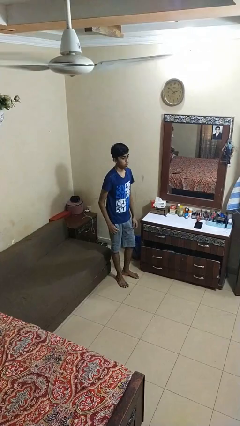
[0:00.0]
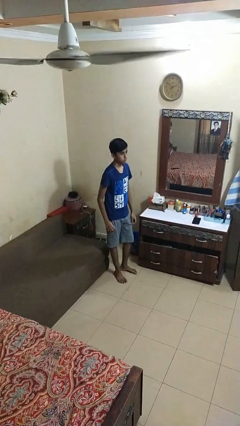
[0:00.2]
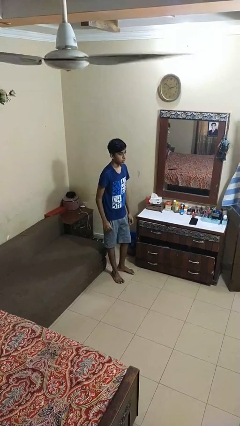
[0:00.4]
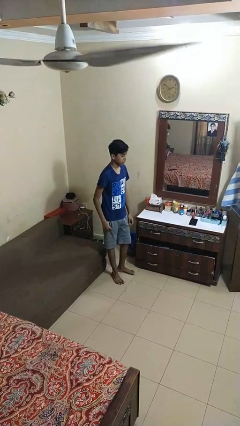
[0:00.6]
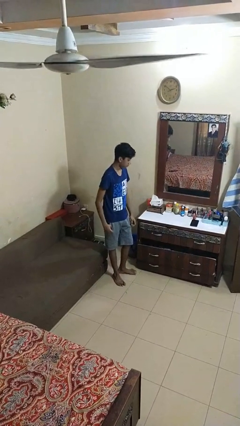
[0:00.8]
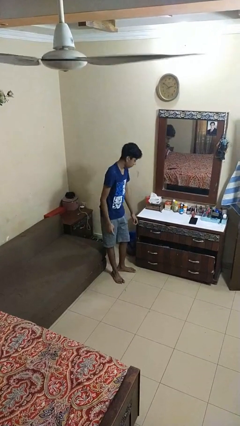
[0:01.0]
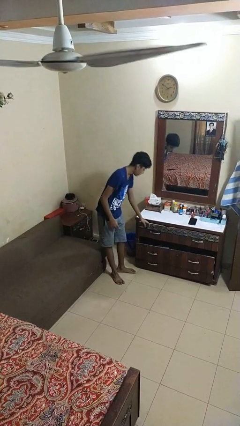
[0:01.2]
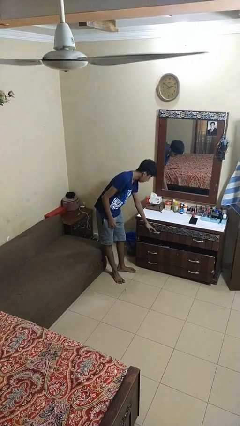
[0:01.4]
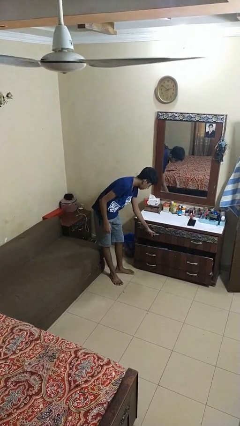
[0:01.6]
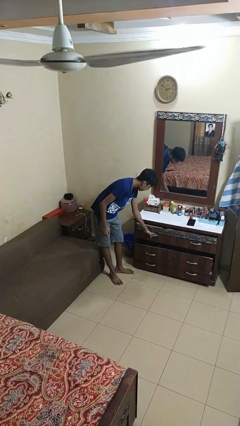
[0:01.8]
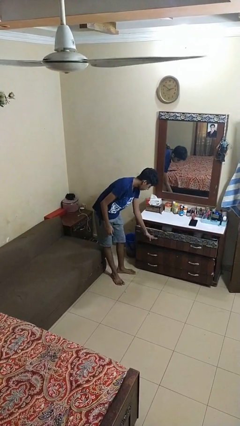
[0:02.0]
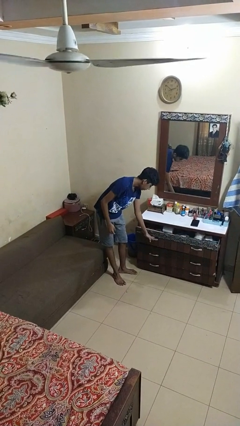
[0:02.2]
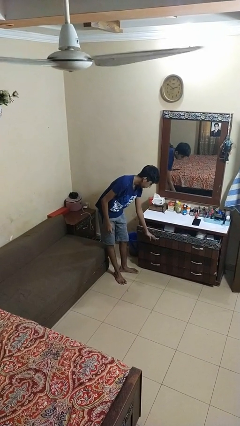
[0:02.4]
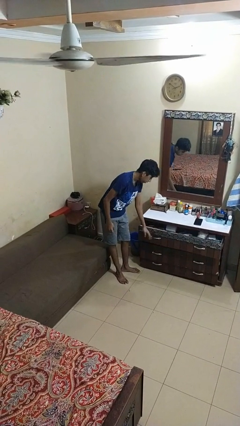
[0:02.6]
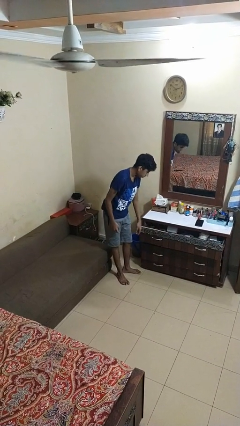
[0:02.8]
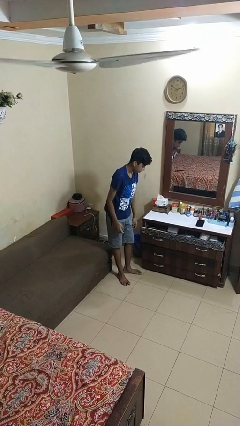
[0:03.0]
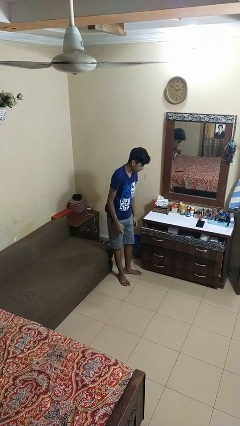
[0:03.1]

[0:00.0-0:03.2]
person opens dresser drawer

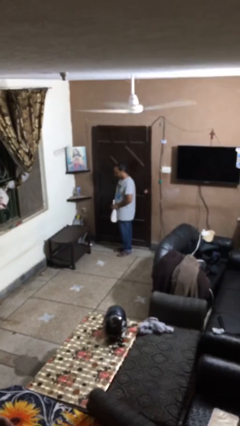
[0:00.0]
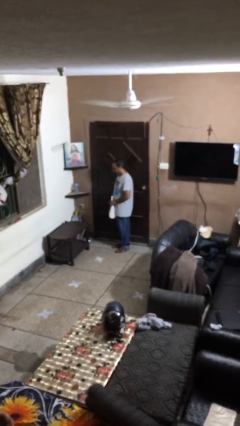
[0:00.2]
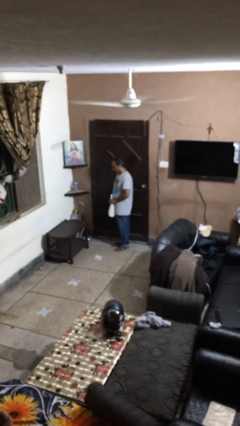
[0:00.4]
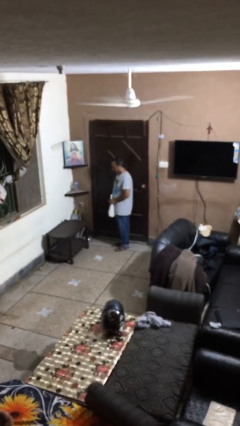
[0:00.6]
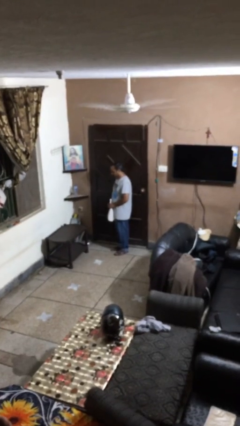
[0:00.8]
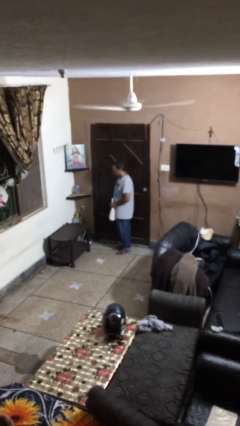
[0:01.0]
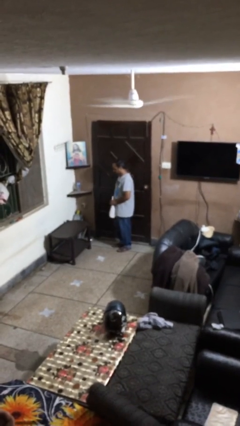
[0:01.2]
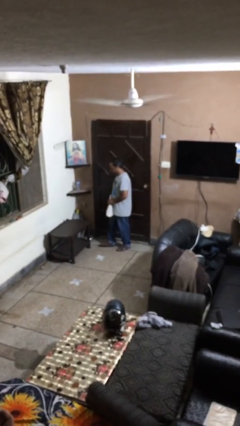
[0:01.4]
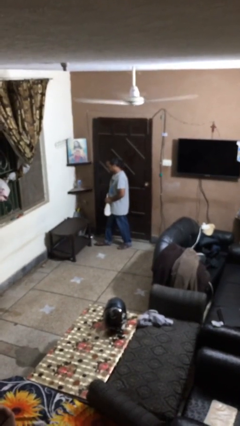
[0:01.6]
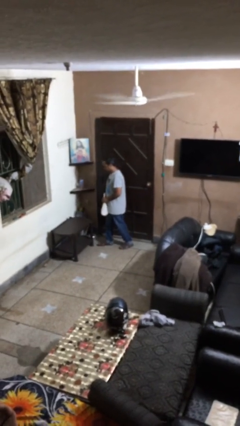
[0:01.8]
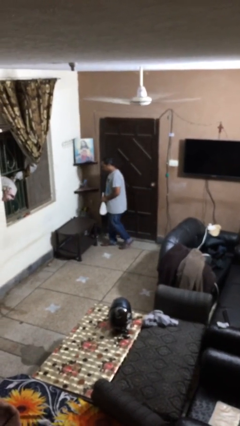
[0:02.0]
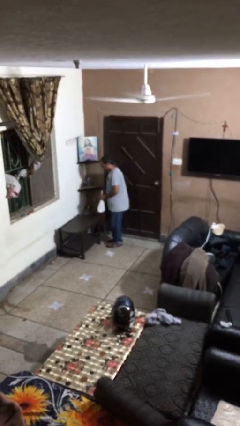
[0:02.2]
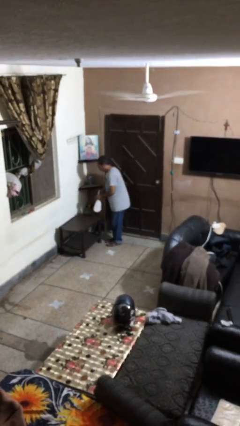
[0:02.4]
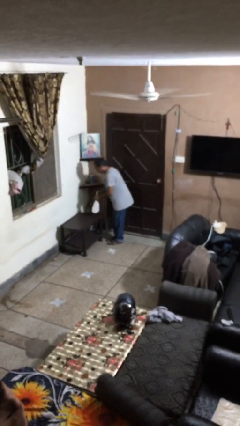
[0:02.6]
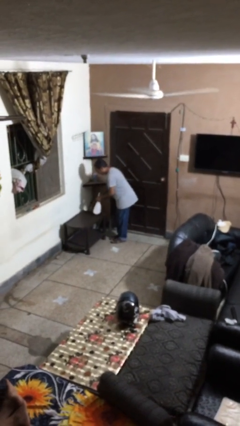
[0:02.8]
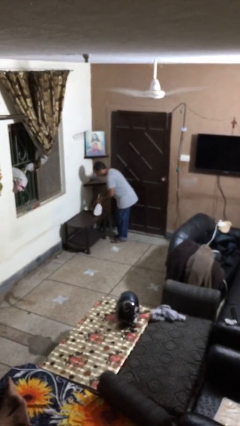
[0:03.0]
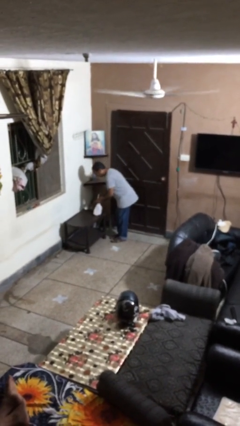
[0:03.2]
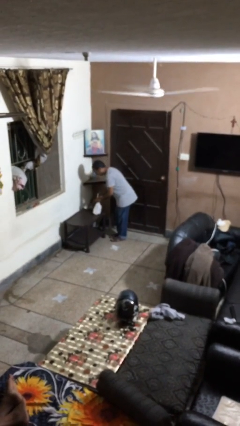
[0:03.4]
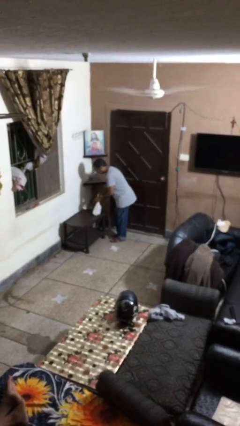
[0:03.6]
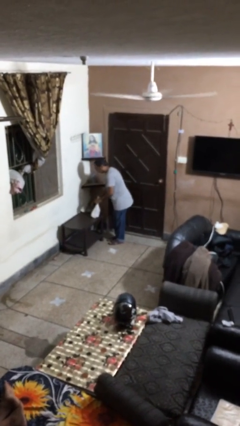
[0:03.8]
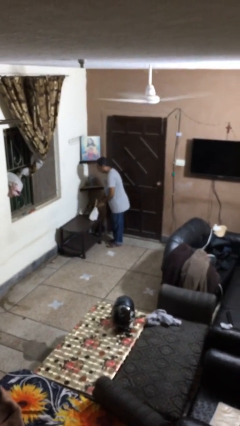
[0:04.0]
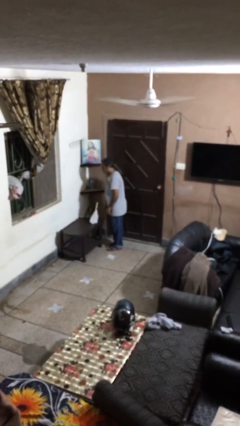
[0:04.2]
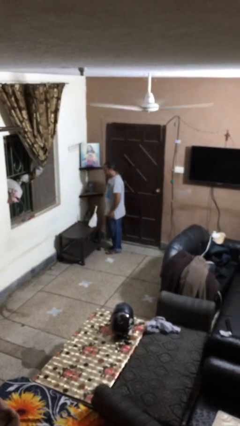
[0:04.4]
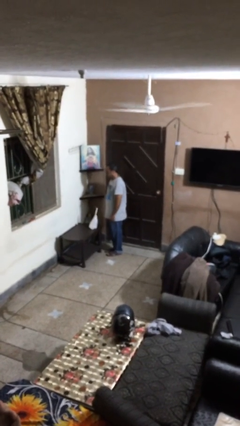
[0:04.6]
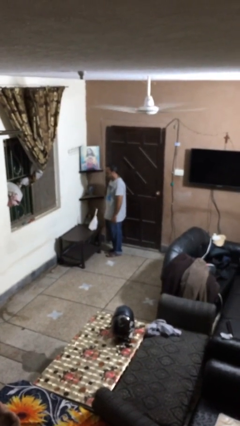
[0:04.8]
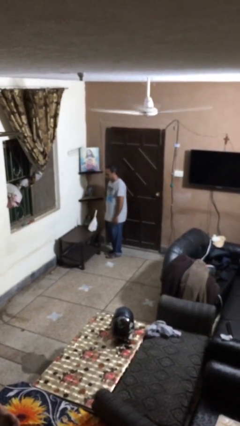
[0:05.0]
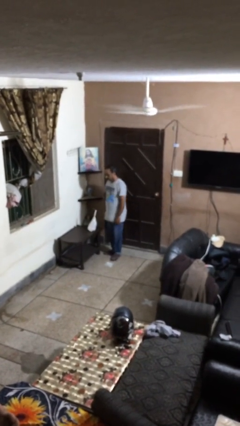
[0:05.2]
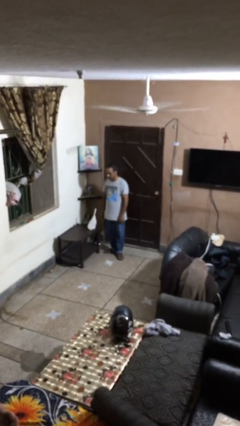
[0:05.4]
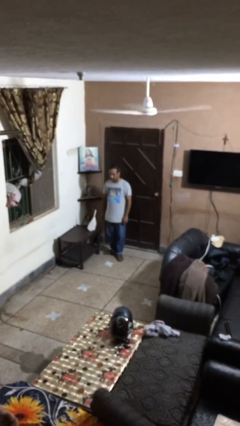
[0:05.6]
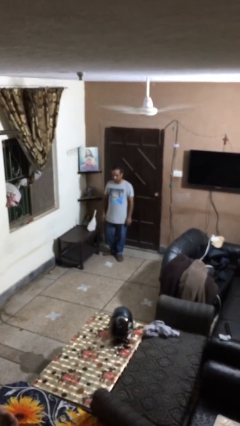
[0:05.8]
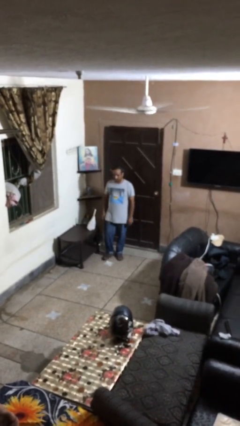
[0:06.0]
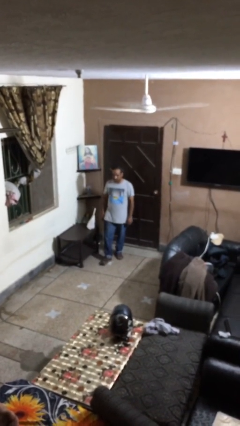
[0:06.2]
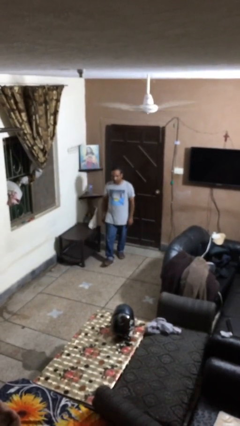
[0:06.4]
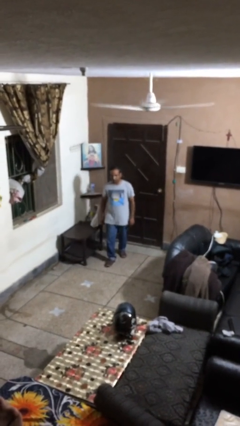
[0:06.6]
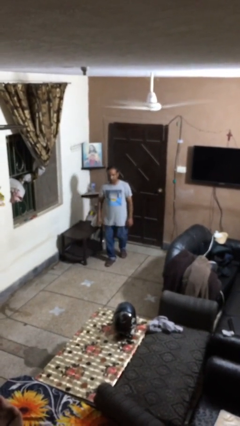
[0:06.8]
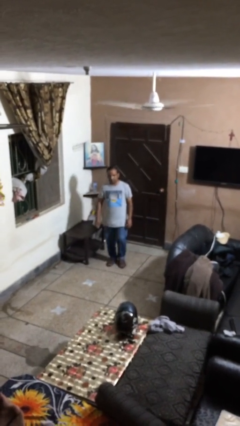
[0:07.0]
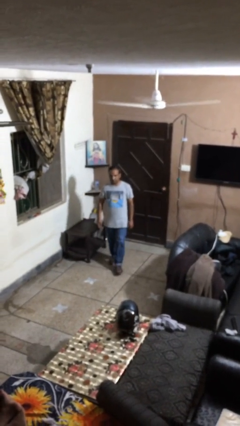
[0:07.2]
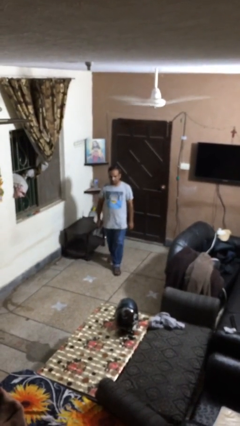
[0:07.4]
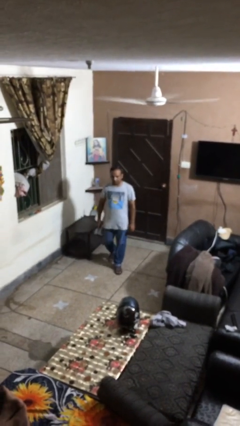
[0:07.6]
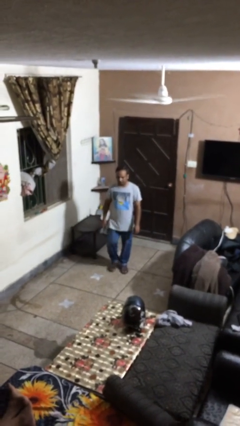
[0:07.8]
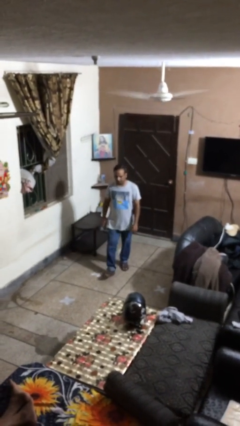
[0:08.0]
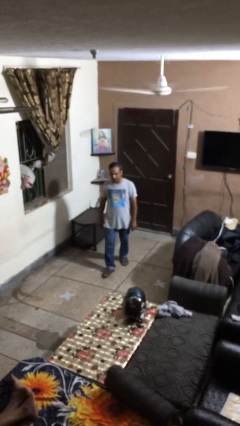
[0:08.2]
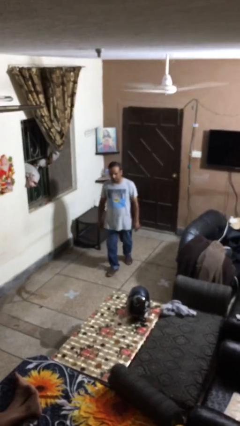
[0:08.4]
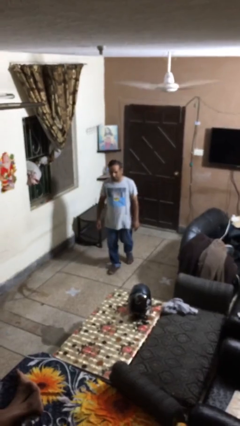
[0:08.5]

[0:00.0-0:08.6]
person puts down object on table

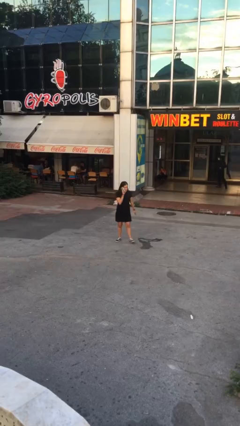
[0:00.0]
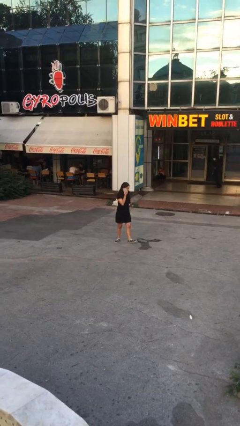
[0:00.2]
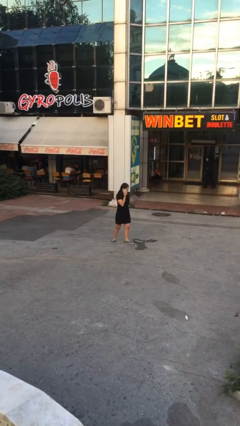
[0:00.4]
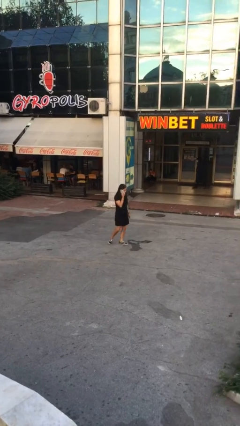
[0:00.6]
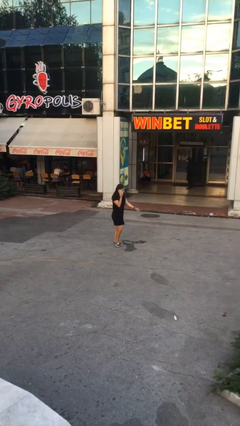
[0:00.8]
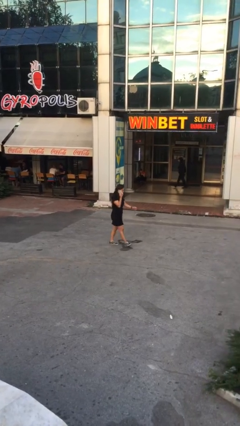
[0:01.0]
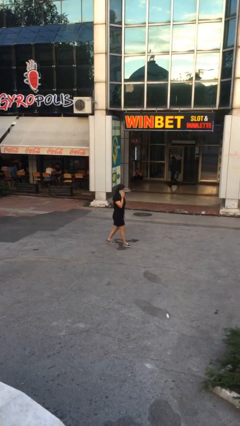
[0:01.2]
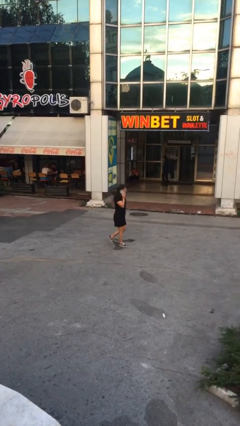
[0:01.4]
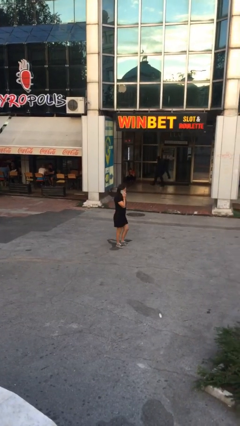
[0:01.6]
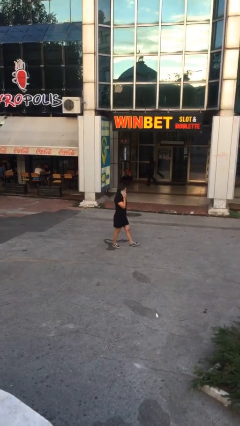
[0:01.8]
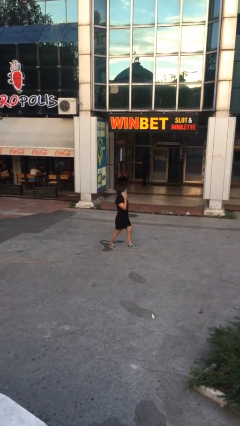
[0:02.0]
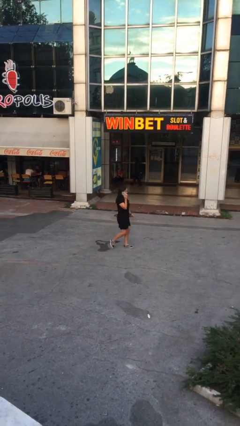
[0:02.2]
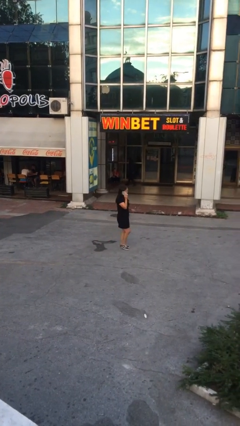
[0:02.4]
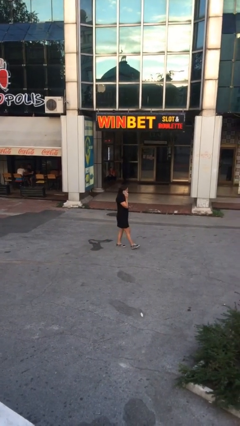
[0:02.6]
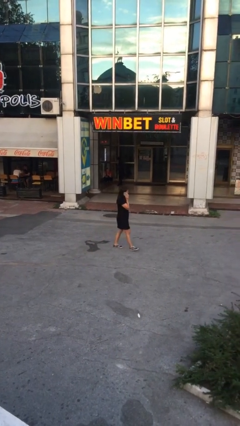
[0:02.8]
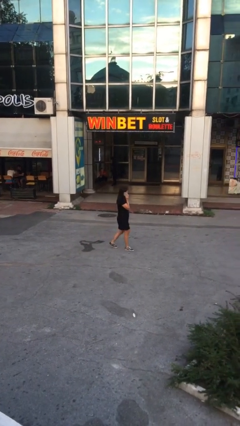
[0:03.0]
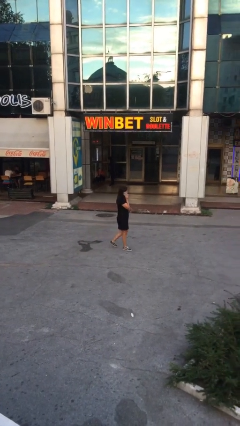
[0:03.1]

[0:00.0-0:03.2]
person talks on phone

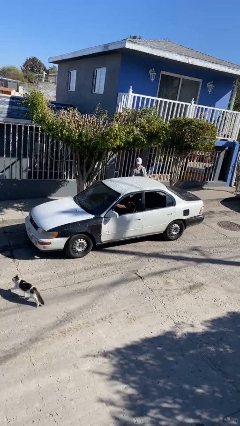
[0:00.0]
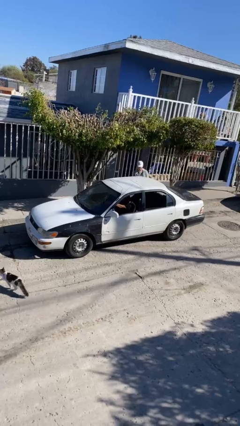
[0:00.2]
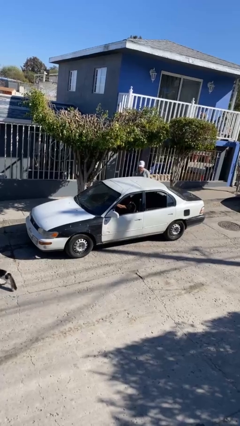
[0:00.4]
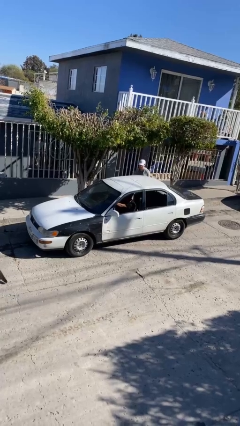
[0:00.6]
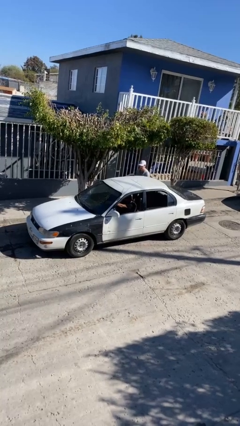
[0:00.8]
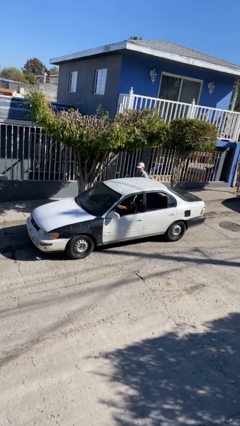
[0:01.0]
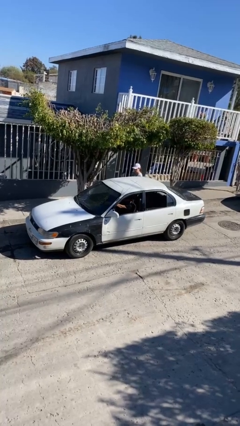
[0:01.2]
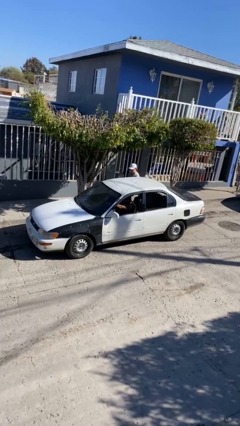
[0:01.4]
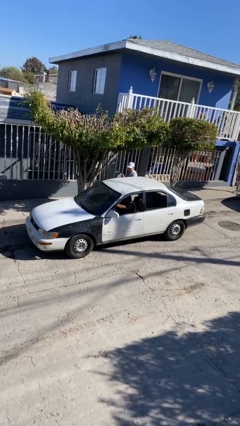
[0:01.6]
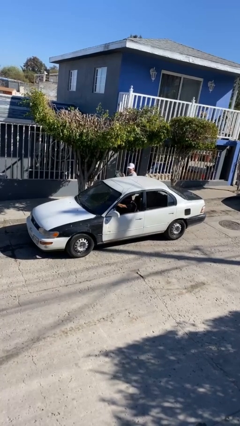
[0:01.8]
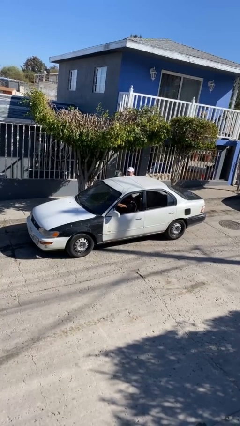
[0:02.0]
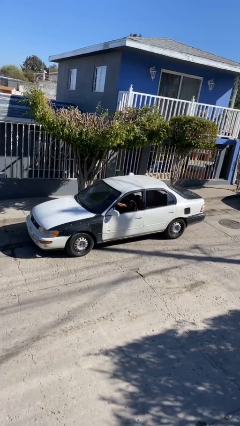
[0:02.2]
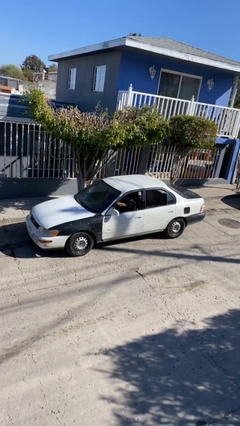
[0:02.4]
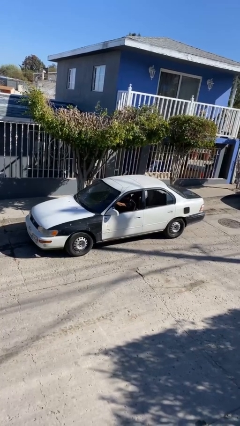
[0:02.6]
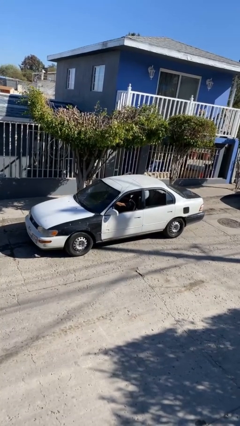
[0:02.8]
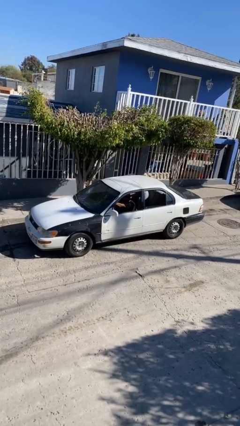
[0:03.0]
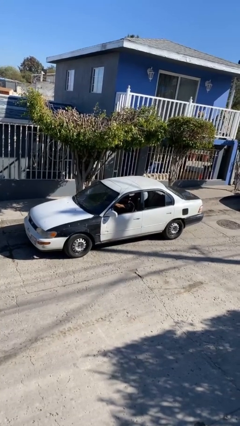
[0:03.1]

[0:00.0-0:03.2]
car picks up person
